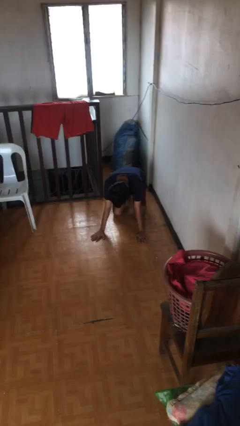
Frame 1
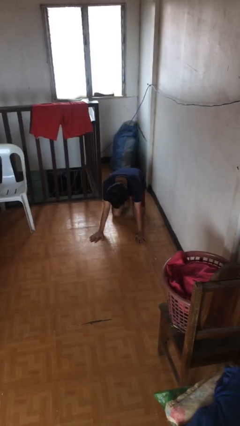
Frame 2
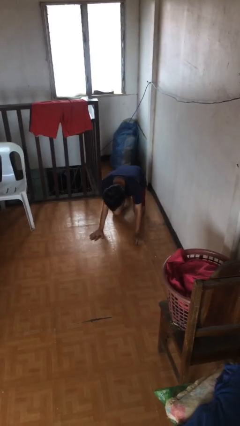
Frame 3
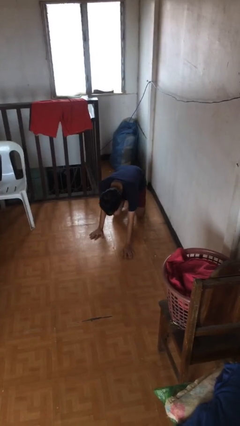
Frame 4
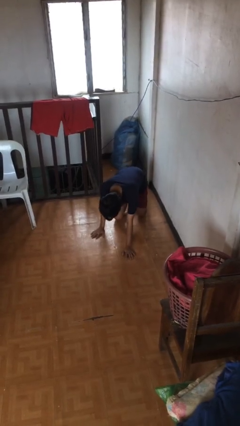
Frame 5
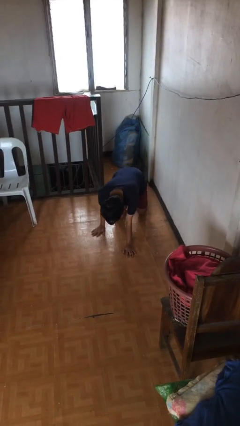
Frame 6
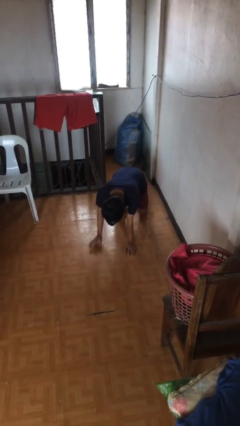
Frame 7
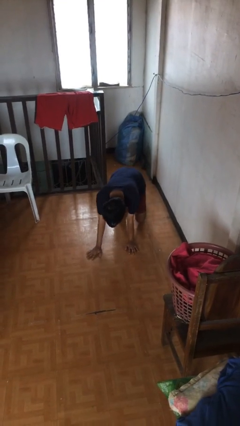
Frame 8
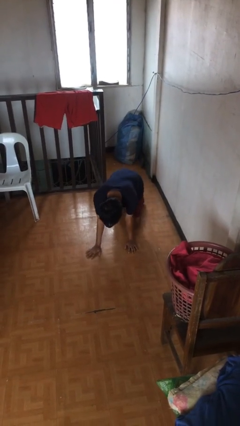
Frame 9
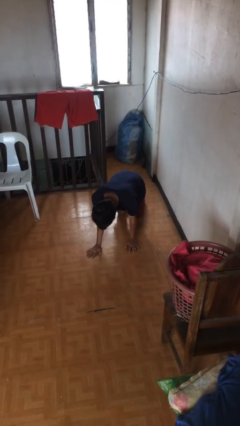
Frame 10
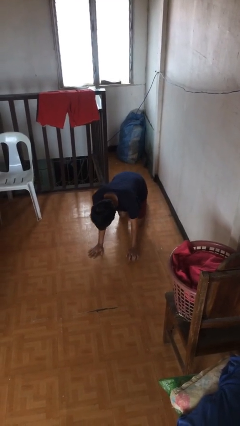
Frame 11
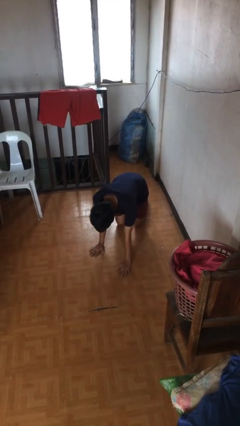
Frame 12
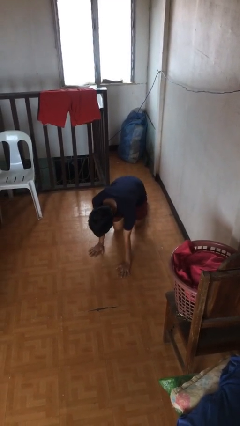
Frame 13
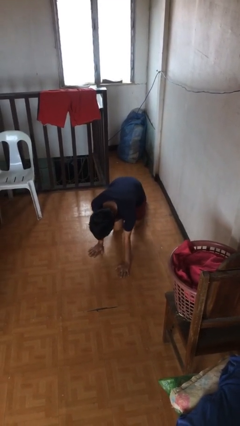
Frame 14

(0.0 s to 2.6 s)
person crawls

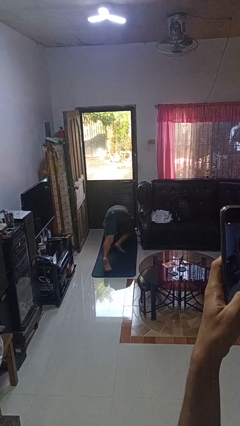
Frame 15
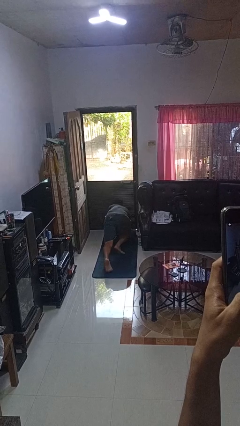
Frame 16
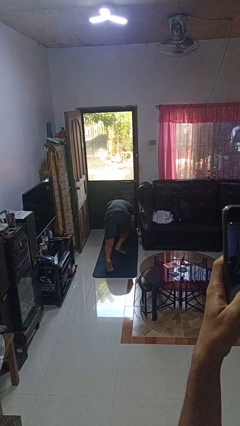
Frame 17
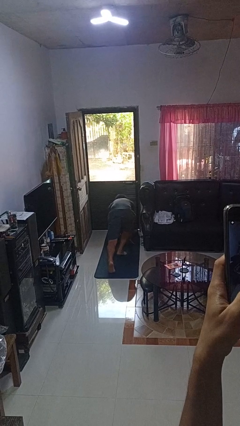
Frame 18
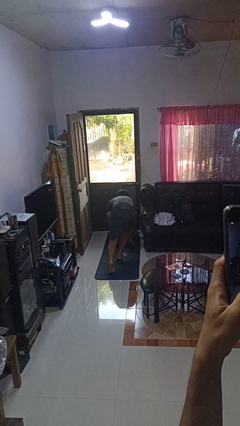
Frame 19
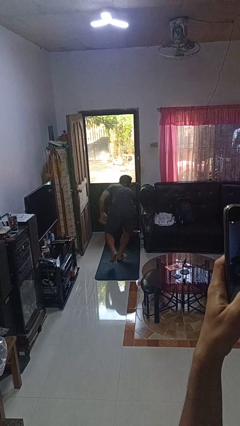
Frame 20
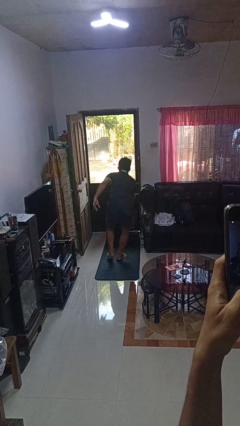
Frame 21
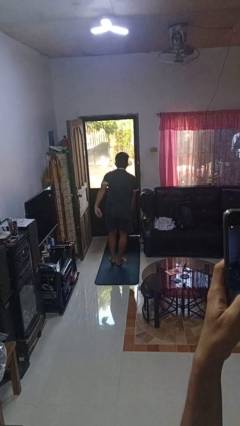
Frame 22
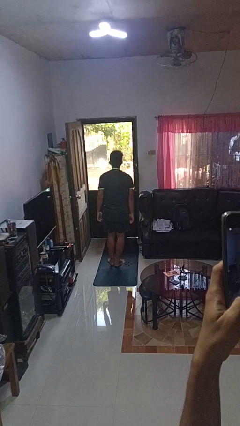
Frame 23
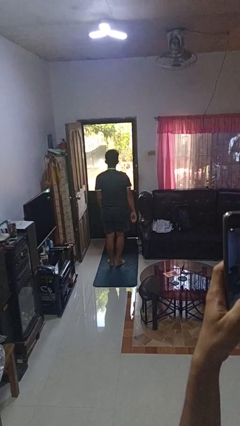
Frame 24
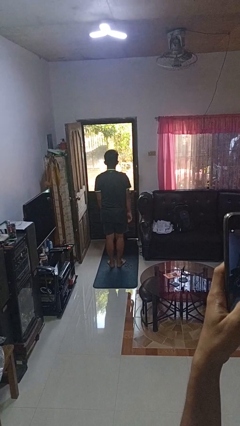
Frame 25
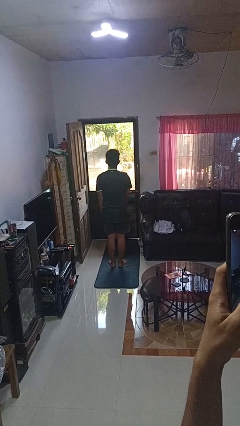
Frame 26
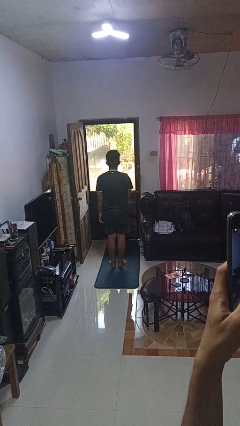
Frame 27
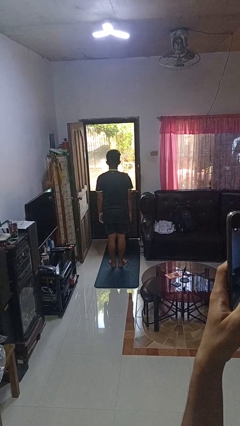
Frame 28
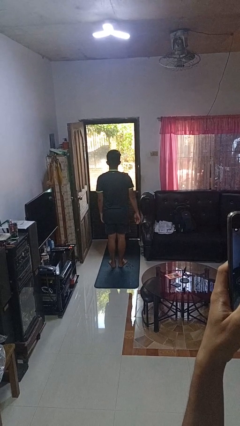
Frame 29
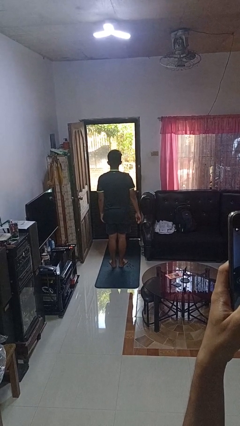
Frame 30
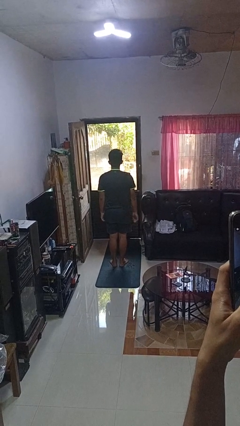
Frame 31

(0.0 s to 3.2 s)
person stands up from floor

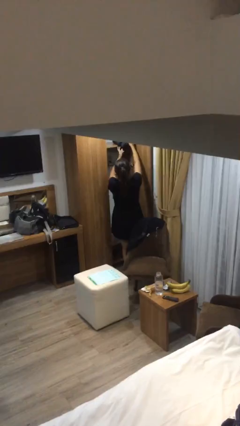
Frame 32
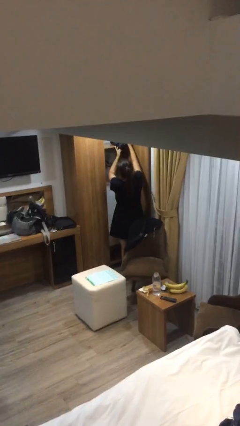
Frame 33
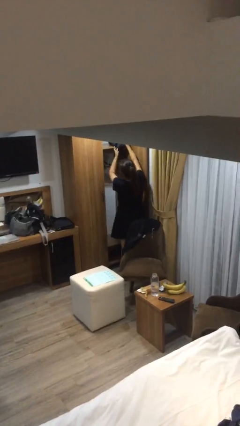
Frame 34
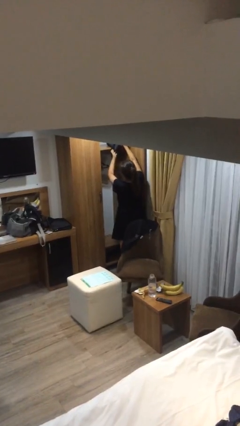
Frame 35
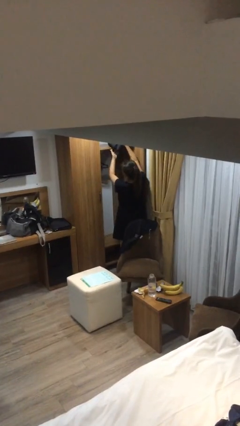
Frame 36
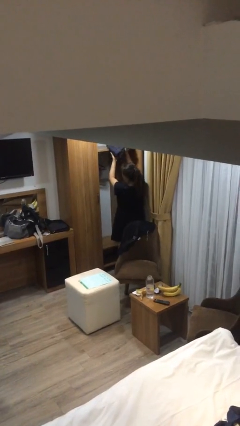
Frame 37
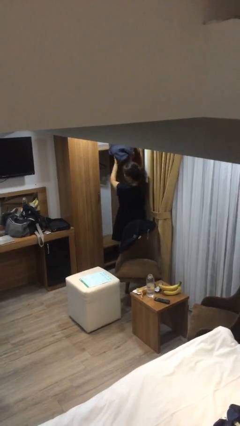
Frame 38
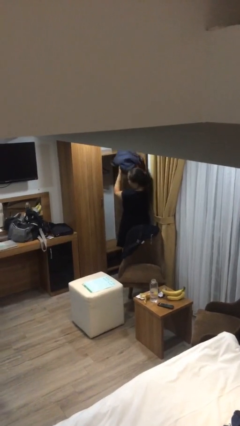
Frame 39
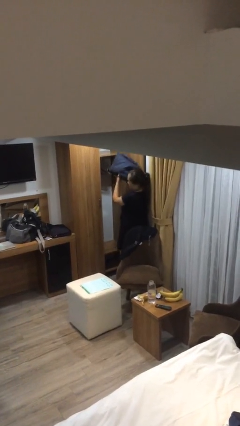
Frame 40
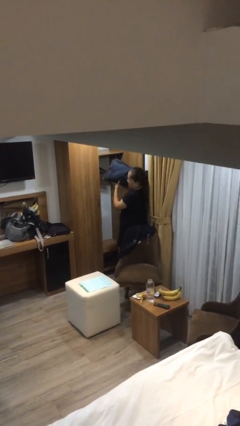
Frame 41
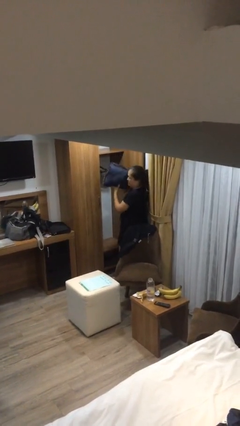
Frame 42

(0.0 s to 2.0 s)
person picks up object from shelf

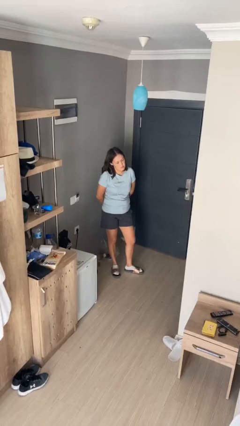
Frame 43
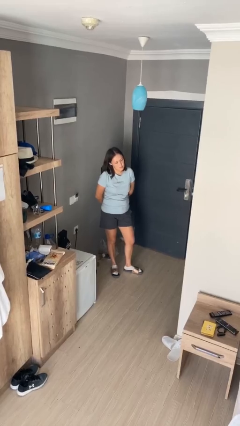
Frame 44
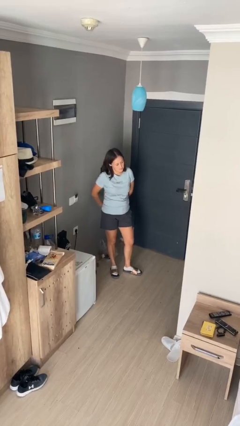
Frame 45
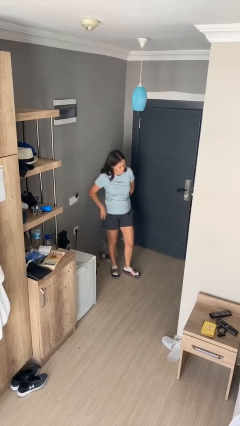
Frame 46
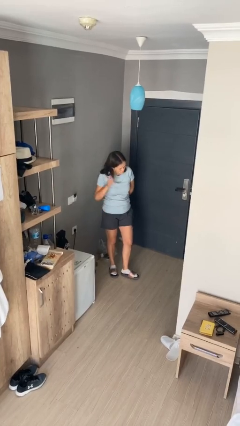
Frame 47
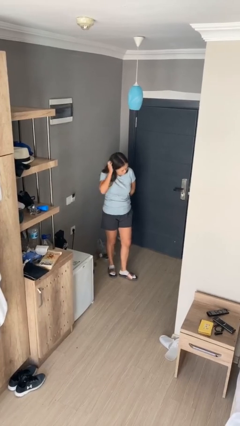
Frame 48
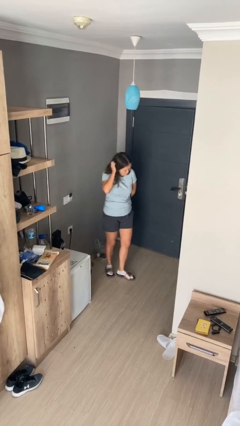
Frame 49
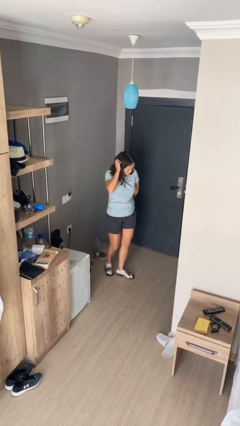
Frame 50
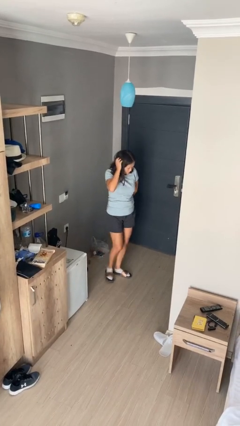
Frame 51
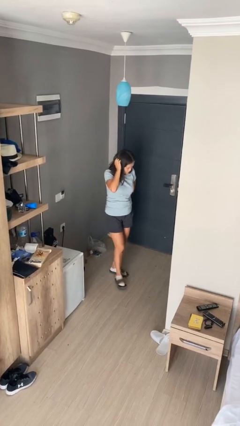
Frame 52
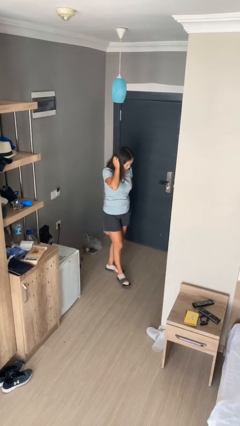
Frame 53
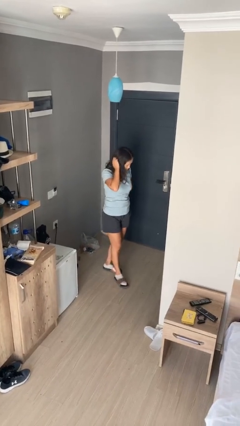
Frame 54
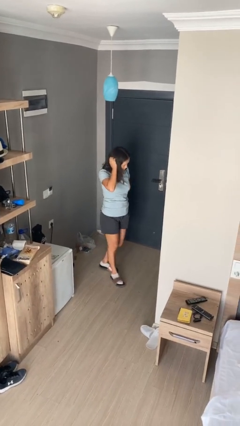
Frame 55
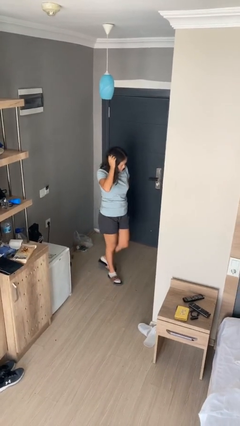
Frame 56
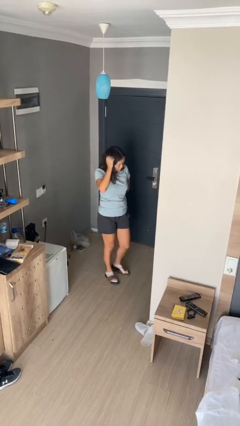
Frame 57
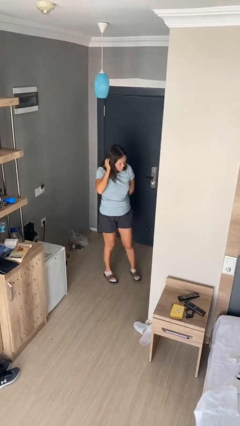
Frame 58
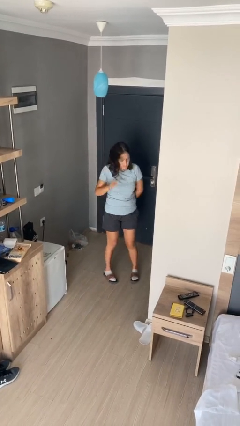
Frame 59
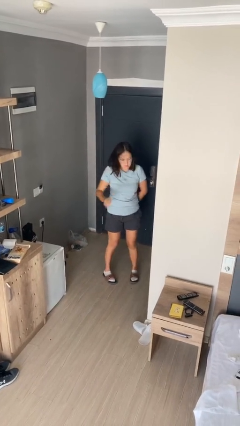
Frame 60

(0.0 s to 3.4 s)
person scratches face

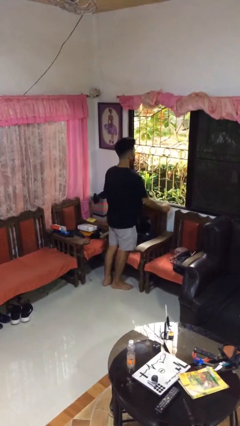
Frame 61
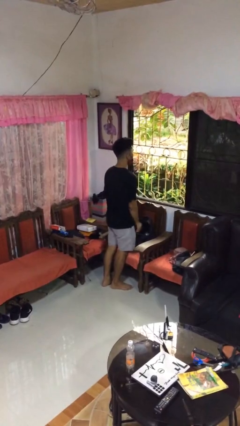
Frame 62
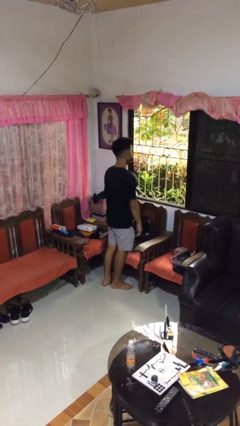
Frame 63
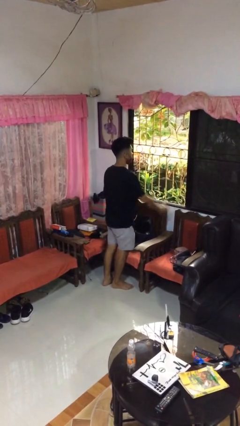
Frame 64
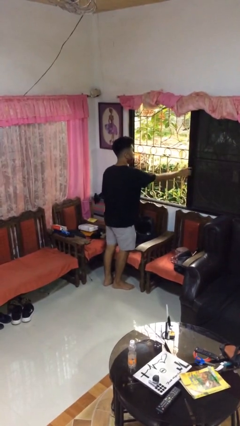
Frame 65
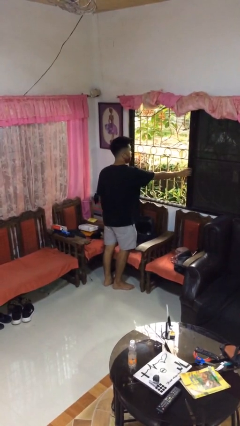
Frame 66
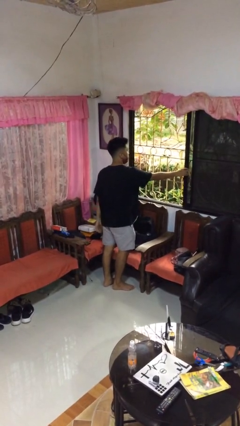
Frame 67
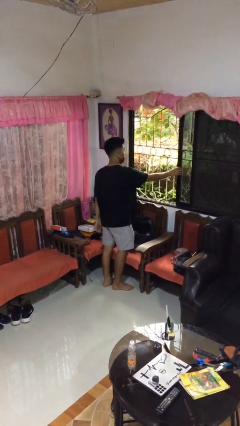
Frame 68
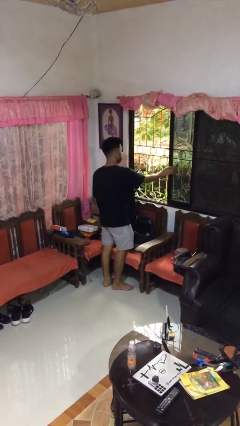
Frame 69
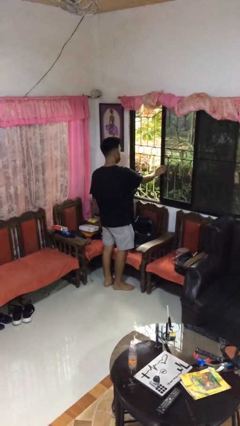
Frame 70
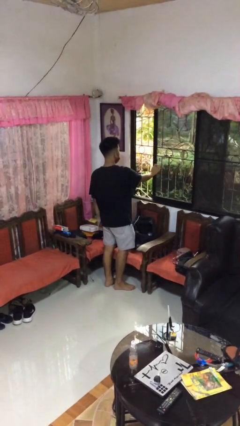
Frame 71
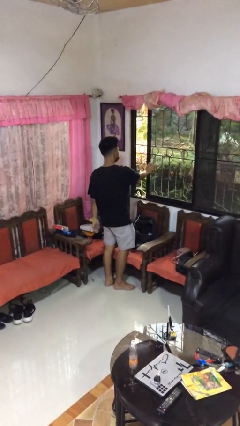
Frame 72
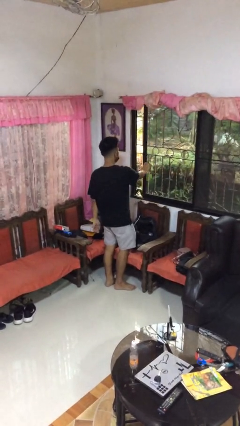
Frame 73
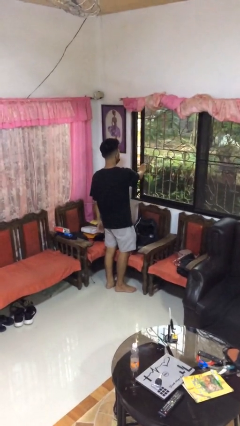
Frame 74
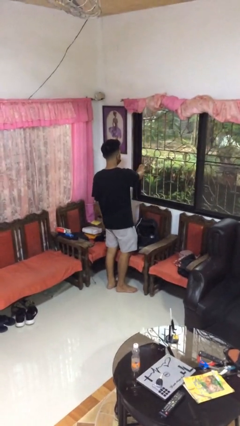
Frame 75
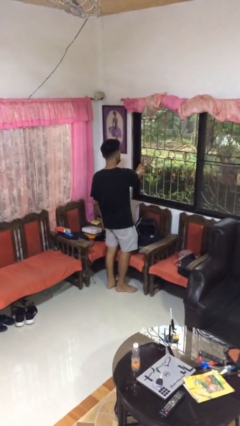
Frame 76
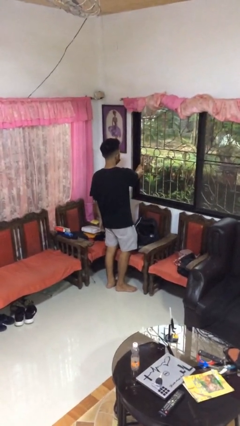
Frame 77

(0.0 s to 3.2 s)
person closes home window

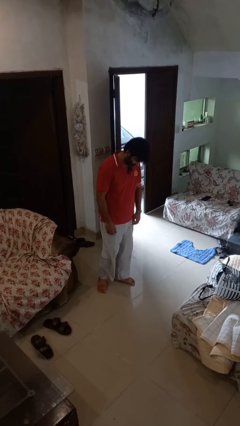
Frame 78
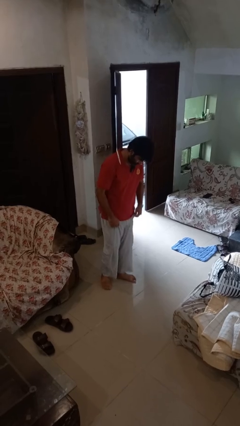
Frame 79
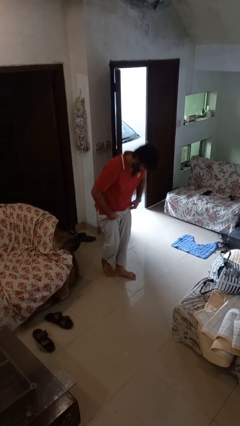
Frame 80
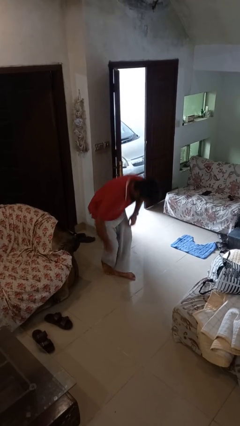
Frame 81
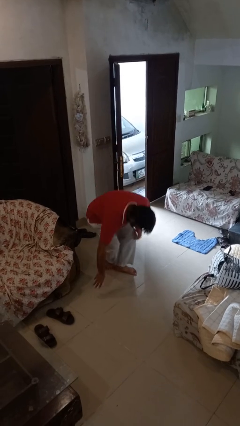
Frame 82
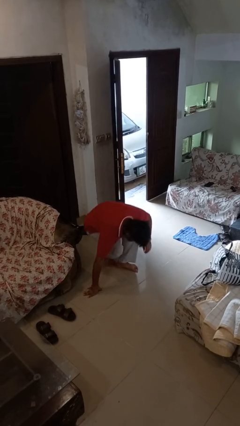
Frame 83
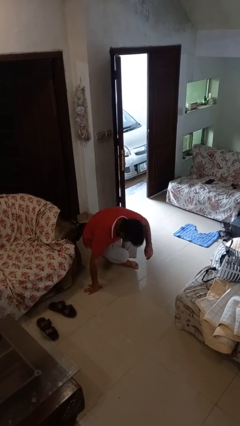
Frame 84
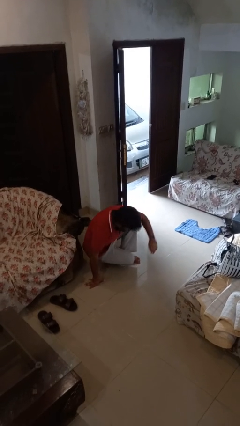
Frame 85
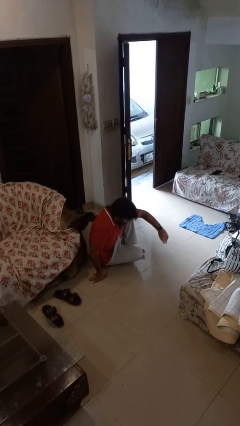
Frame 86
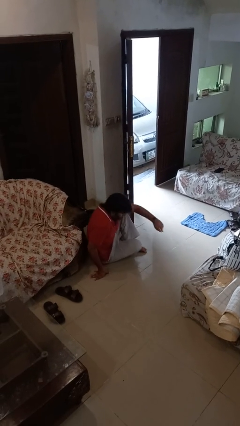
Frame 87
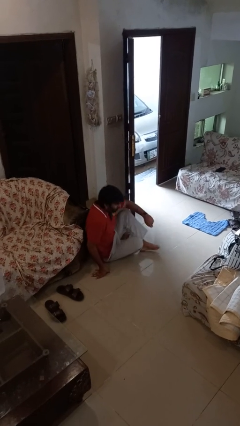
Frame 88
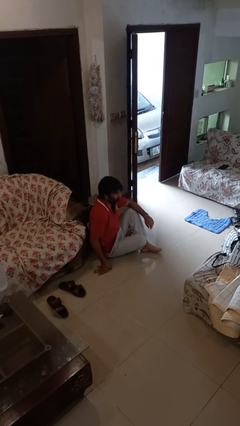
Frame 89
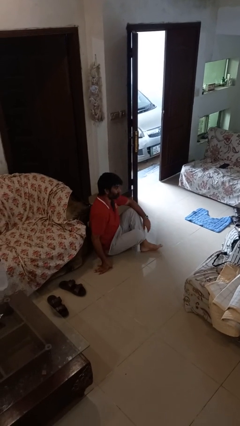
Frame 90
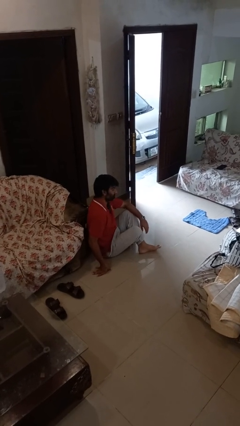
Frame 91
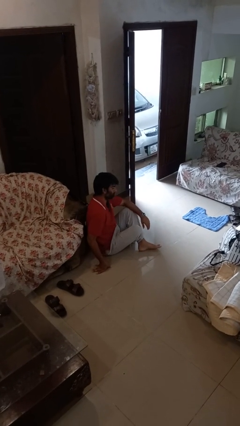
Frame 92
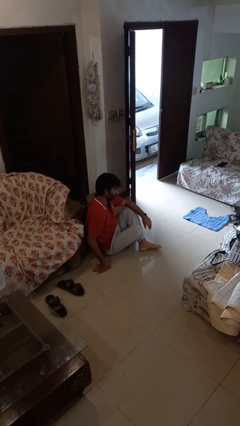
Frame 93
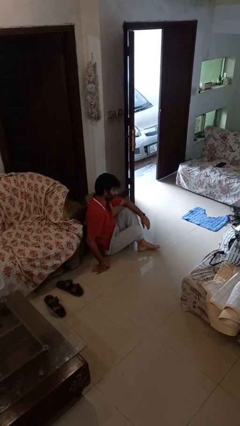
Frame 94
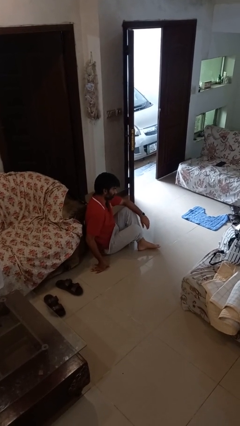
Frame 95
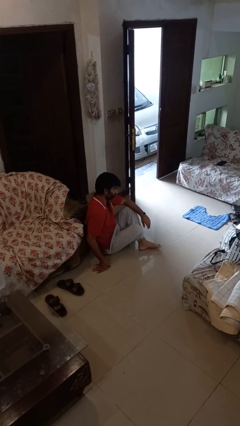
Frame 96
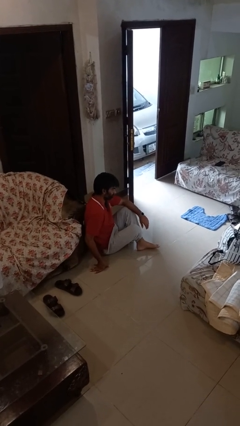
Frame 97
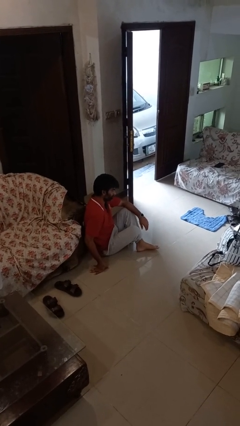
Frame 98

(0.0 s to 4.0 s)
person sits crisscross
